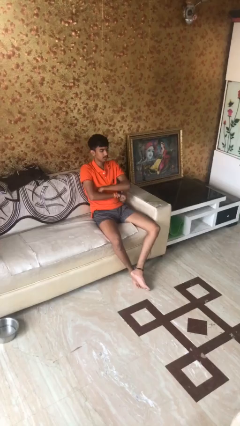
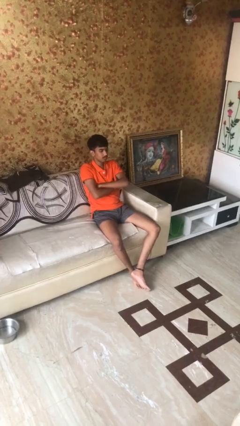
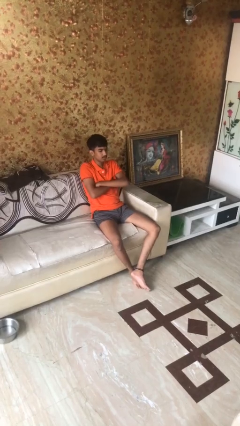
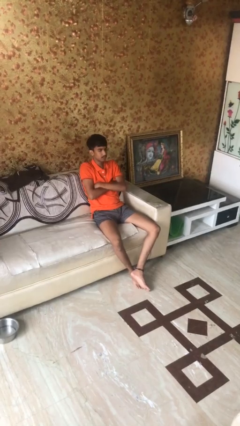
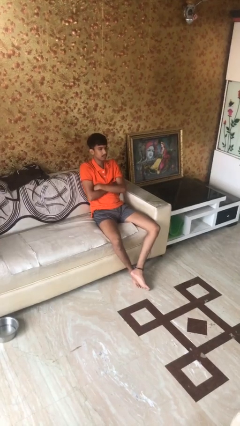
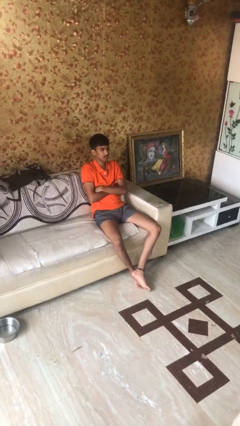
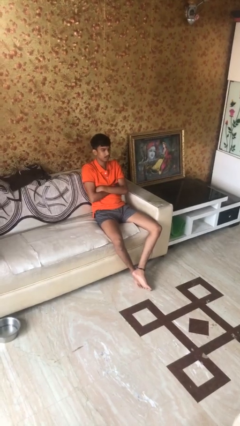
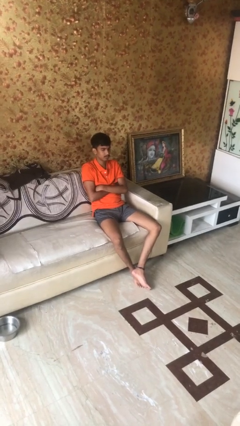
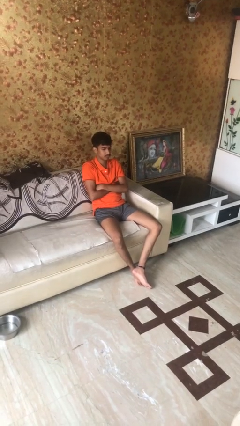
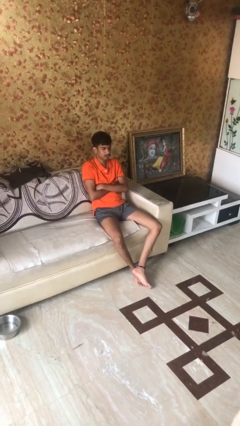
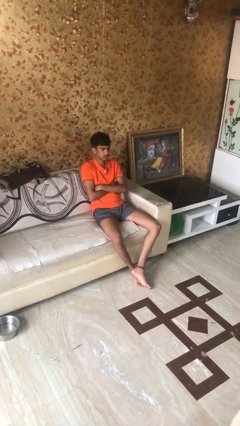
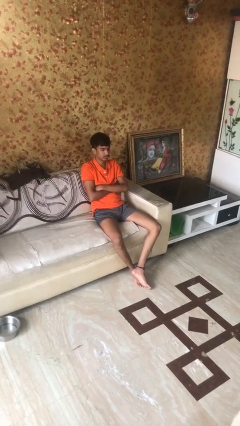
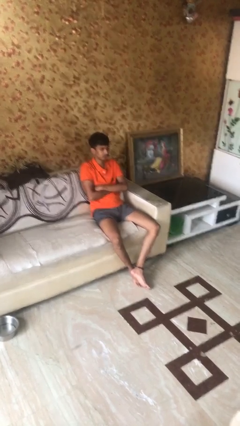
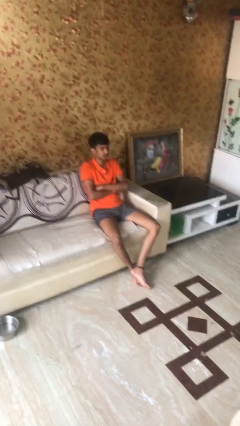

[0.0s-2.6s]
person crosses arms

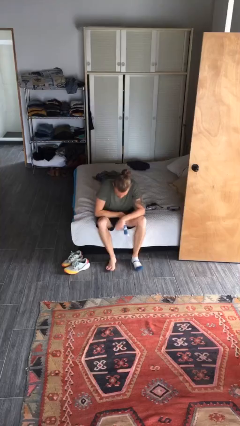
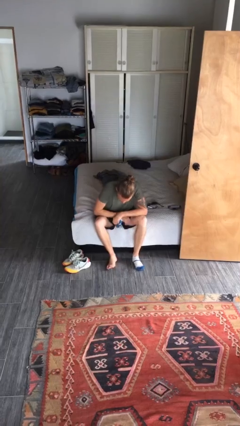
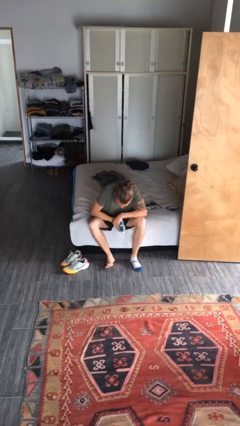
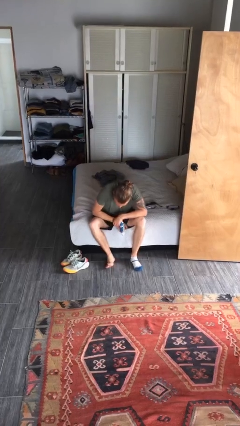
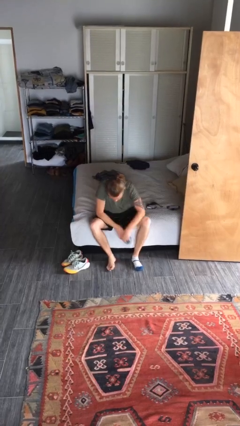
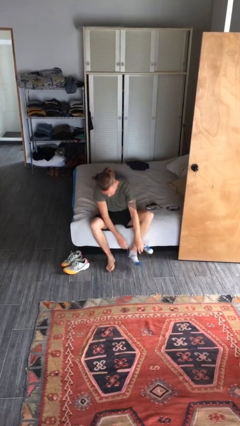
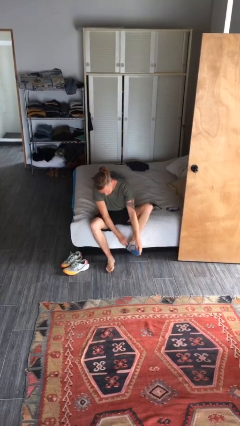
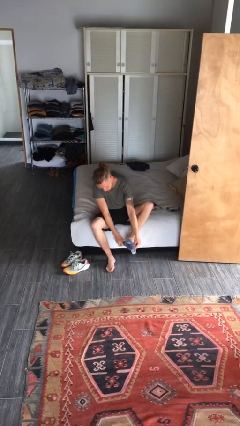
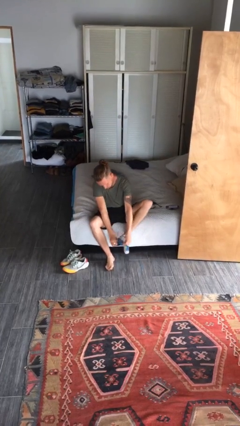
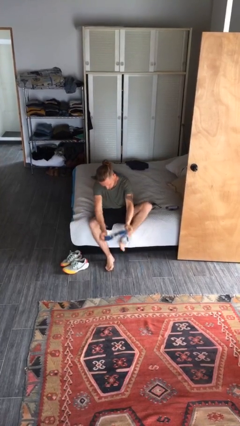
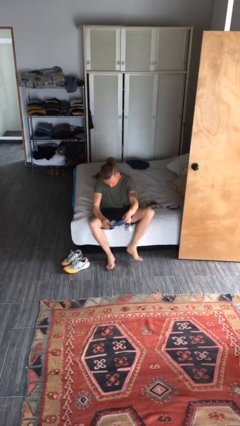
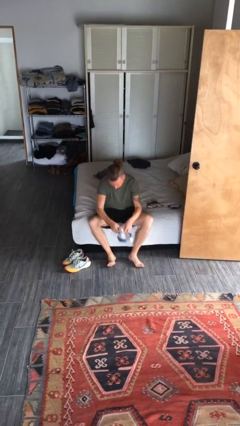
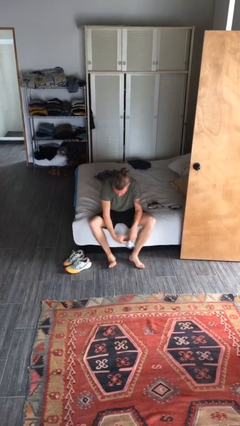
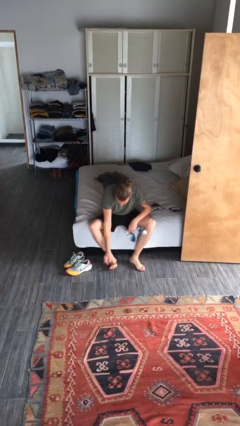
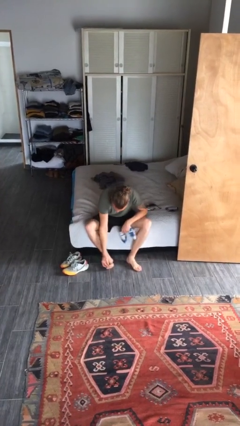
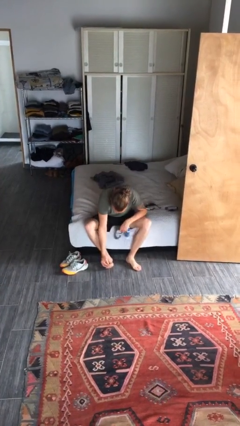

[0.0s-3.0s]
person takes off socks

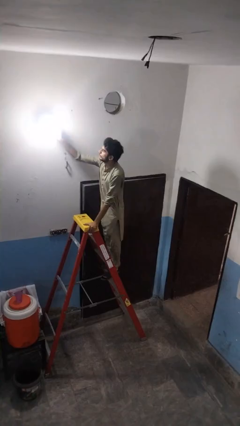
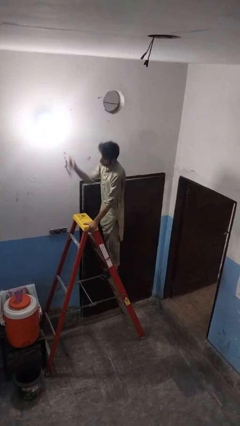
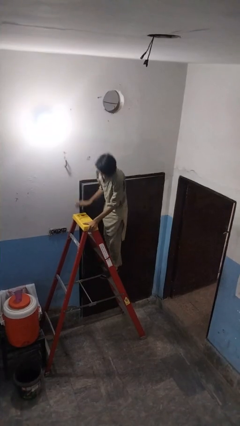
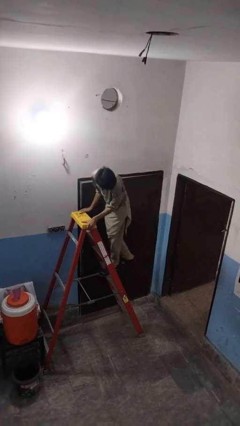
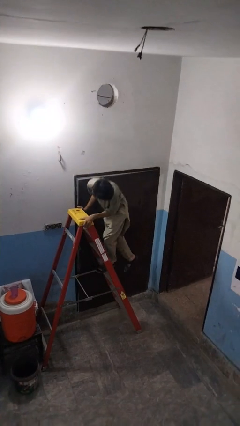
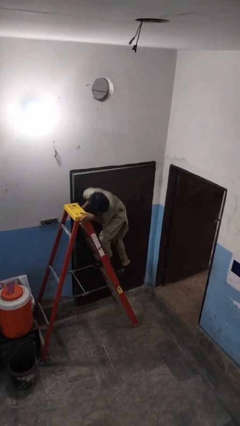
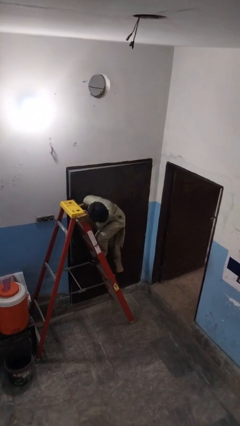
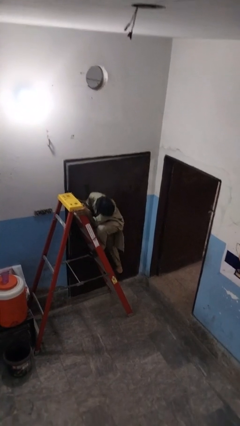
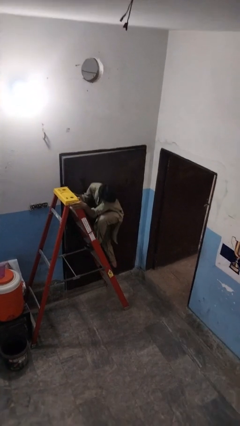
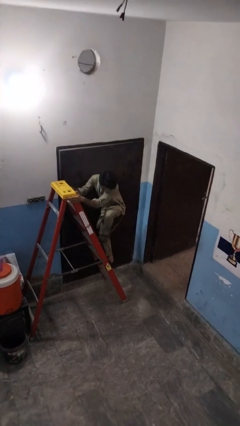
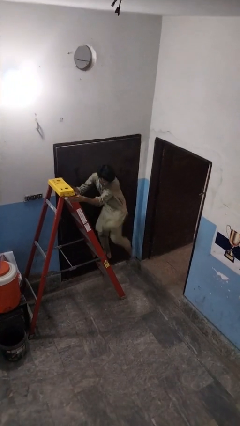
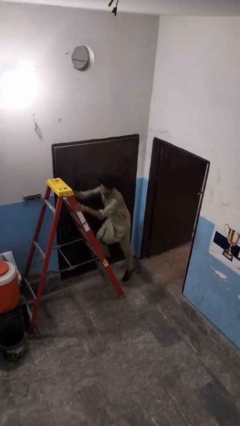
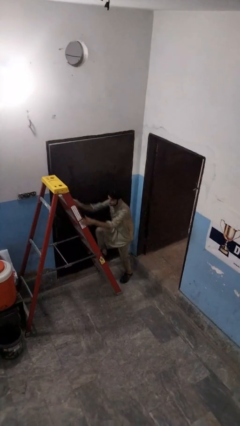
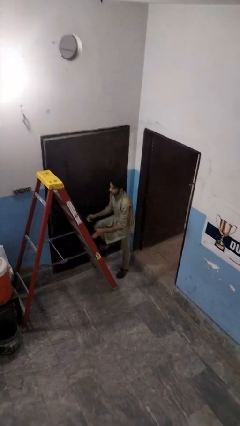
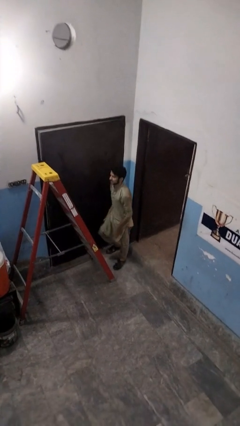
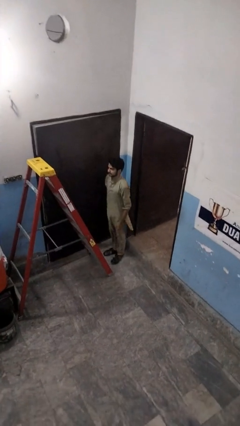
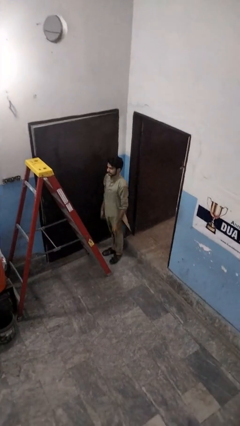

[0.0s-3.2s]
person climbs down ladder

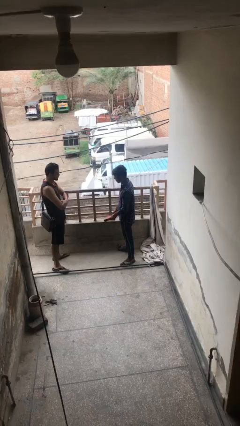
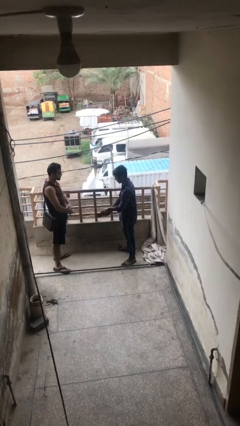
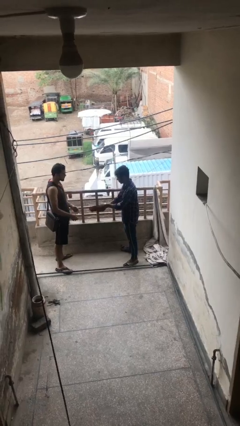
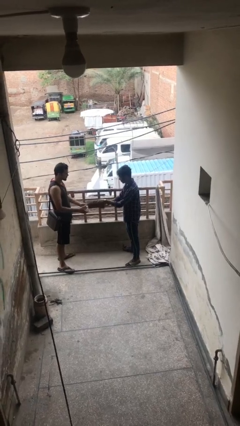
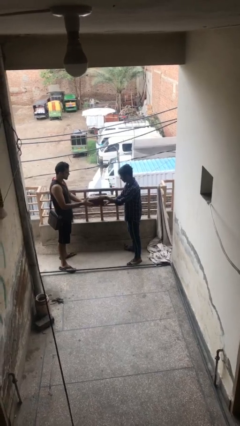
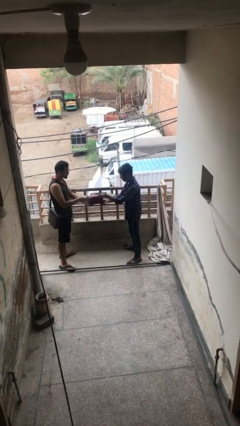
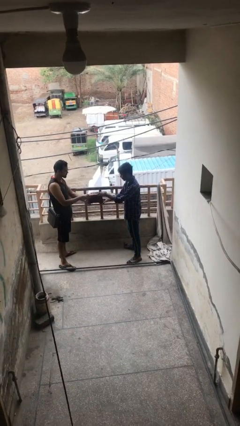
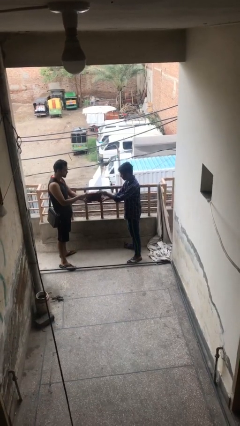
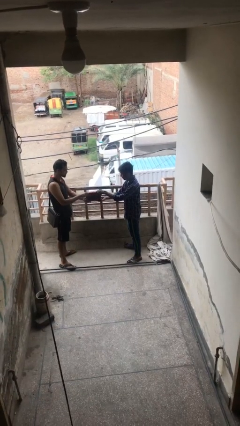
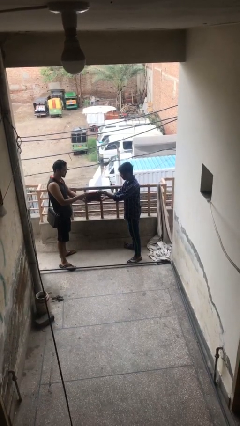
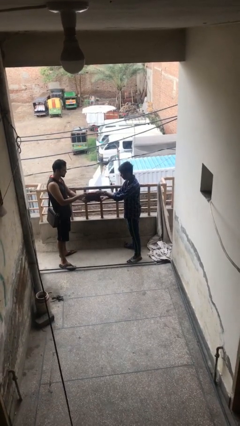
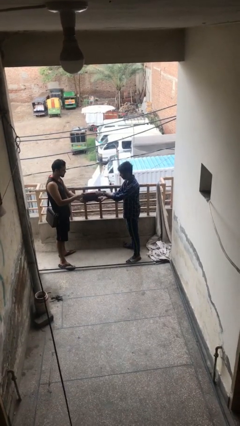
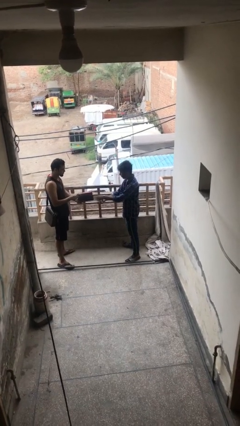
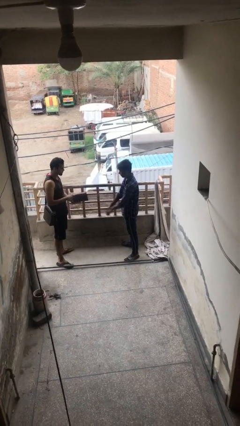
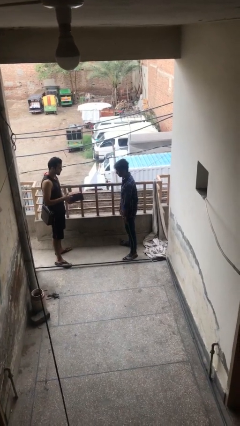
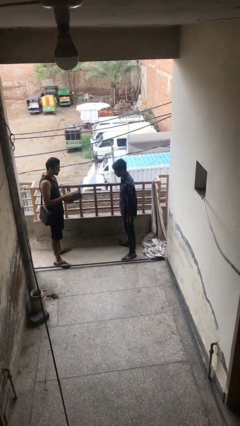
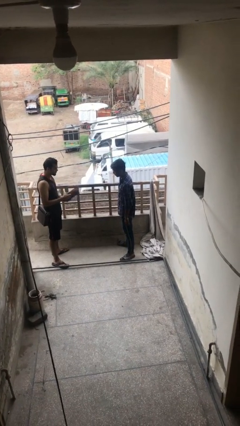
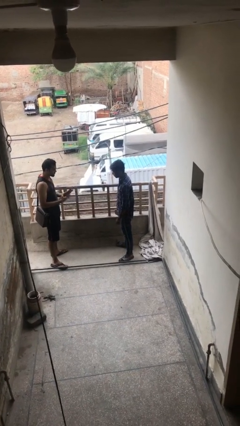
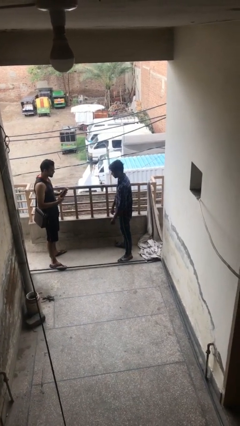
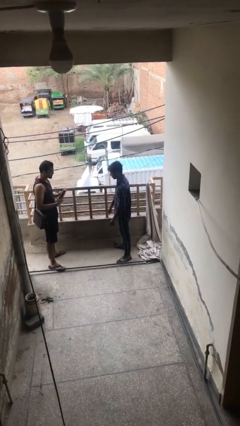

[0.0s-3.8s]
person transfers object to person

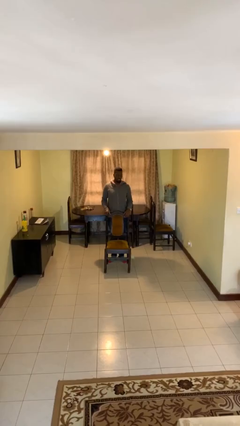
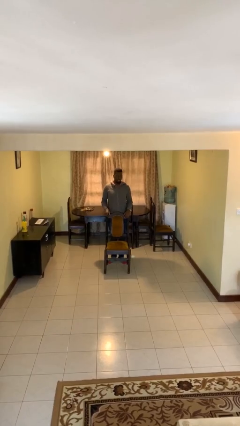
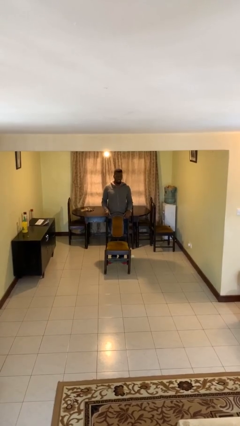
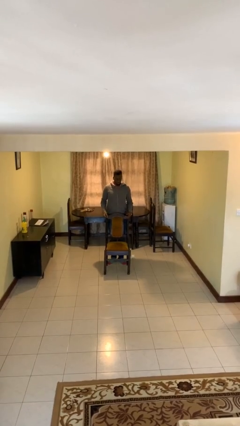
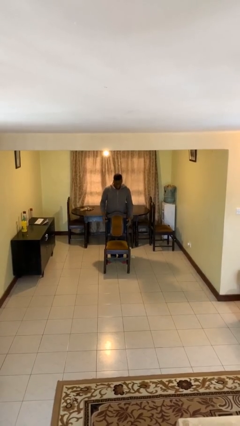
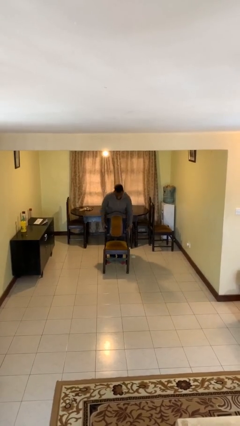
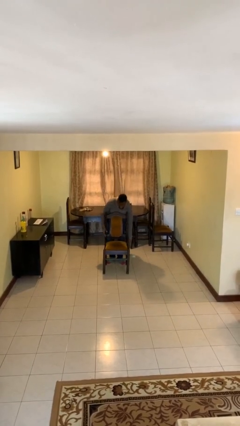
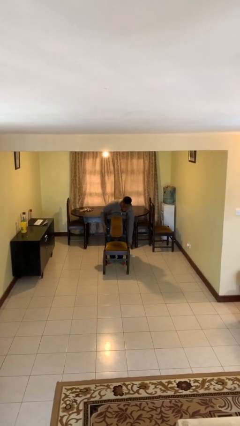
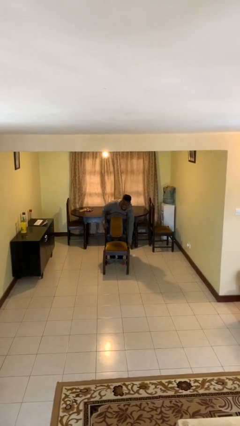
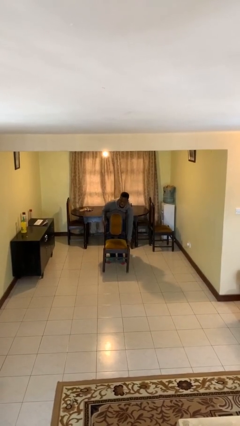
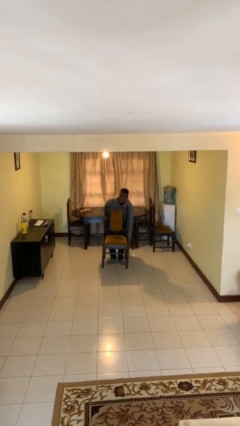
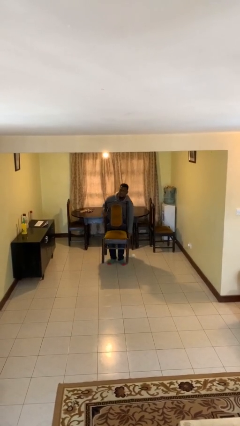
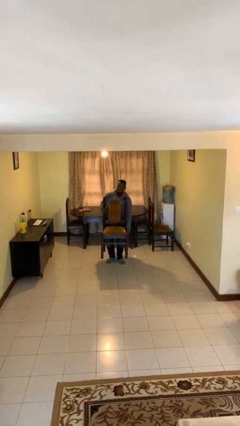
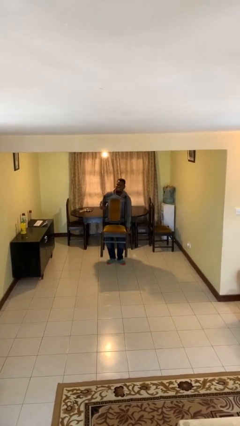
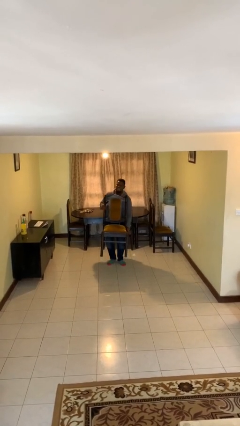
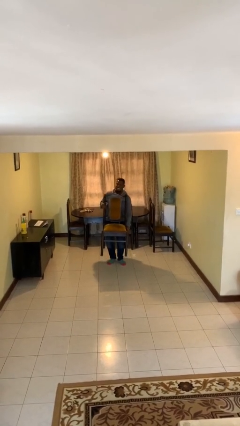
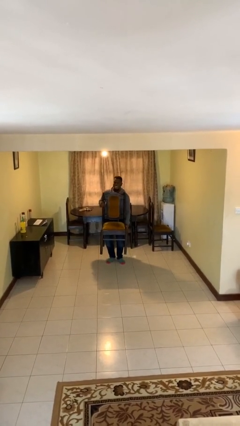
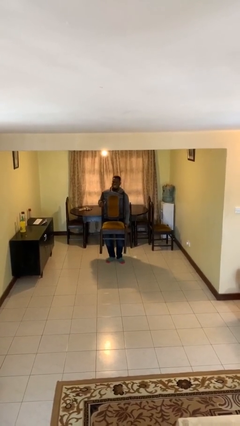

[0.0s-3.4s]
person picks up object from floor

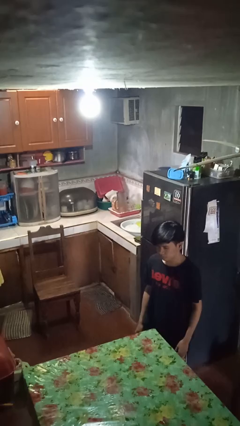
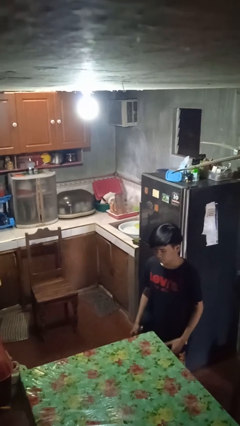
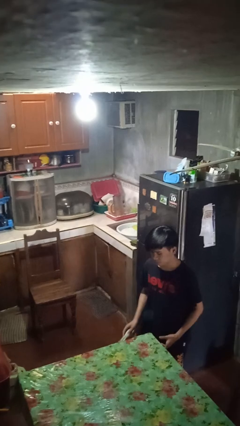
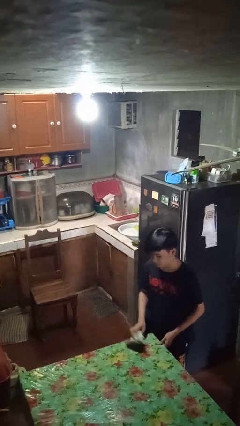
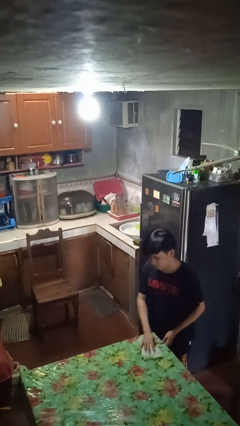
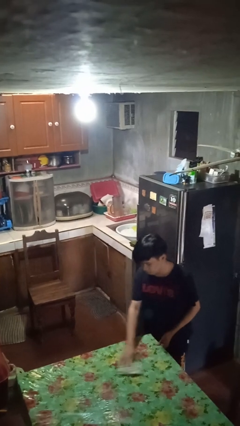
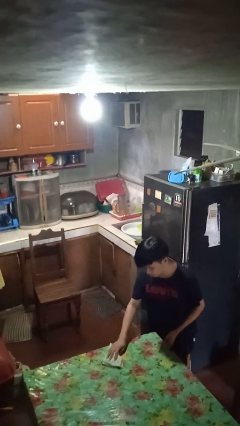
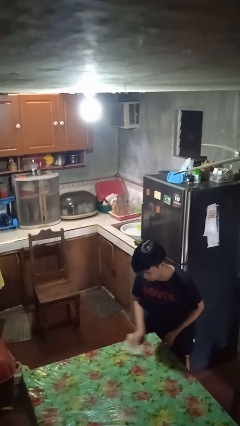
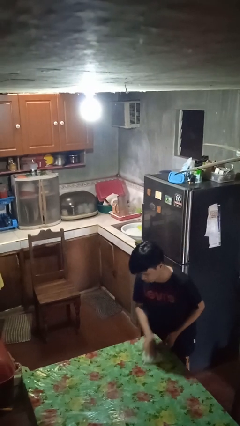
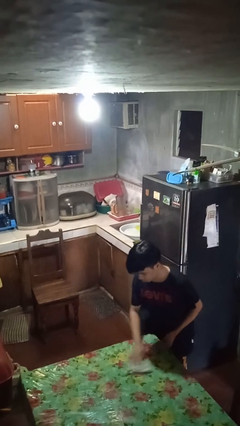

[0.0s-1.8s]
person cleans table with rag
